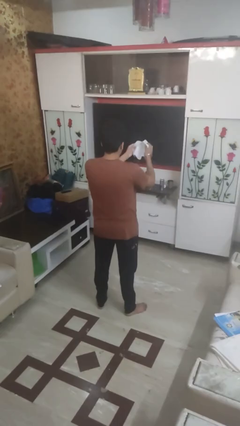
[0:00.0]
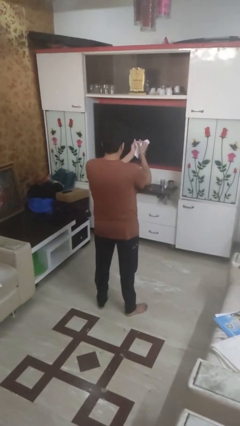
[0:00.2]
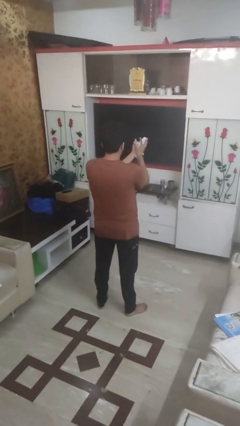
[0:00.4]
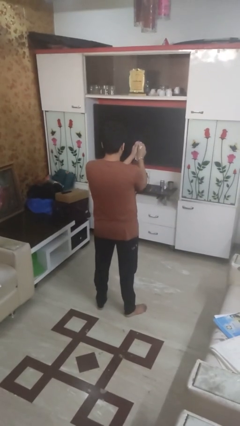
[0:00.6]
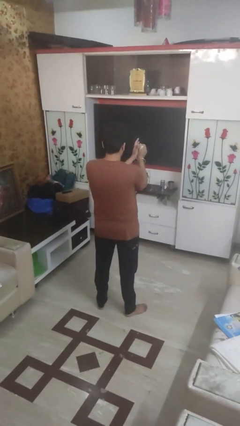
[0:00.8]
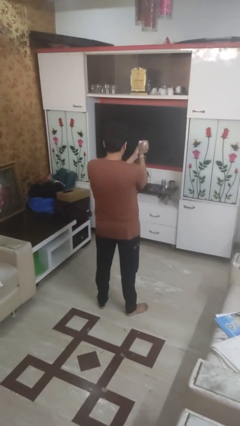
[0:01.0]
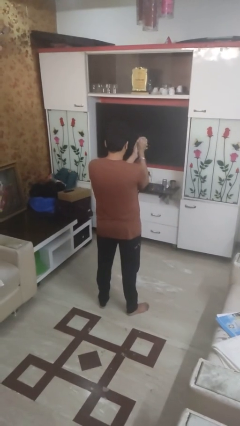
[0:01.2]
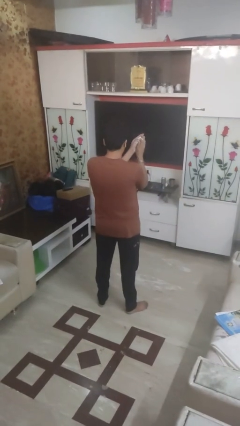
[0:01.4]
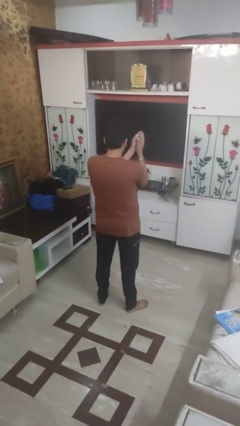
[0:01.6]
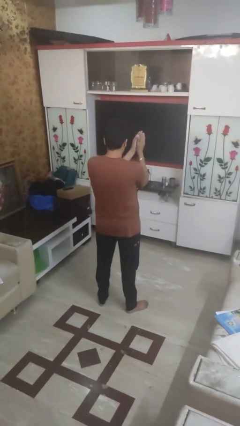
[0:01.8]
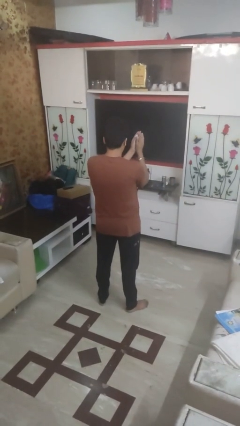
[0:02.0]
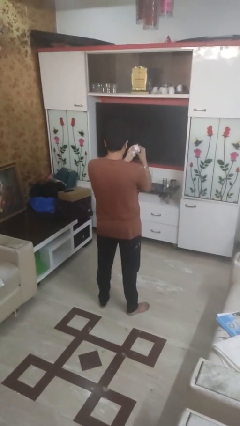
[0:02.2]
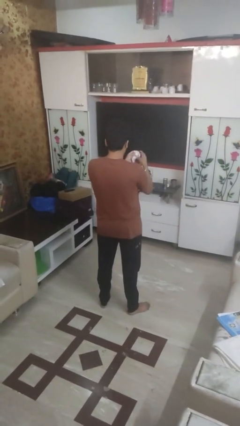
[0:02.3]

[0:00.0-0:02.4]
person crumples paper

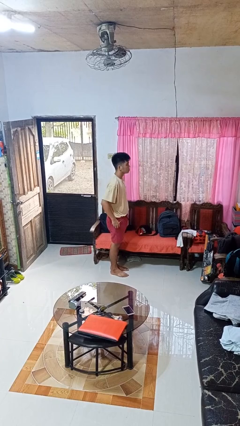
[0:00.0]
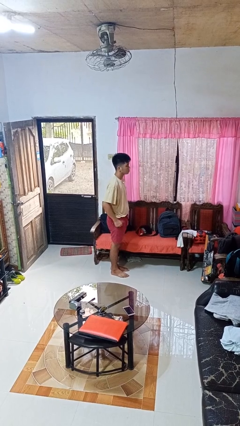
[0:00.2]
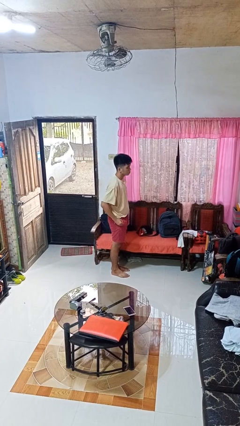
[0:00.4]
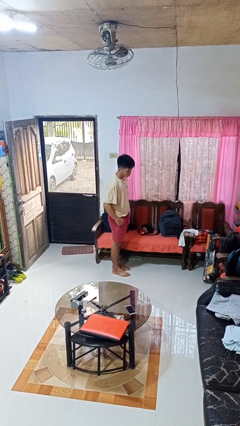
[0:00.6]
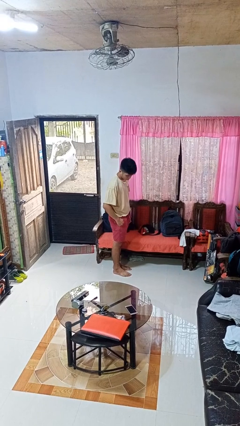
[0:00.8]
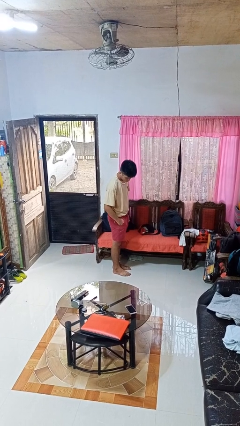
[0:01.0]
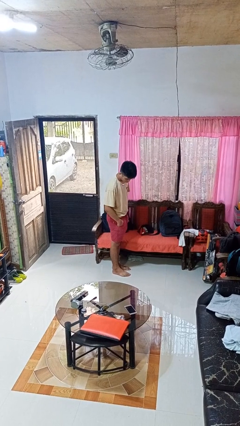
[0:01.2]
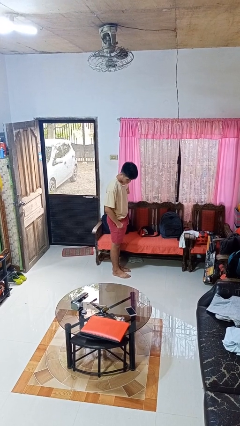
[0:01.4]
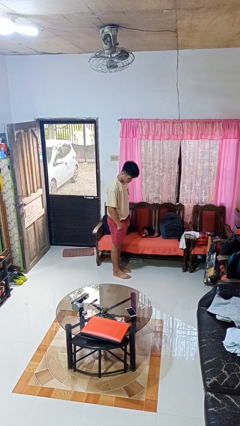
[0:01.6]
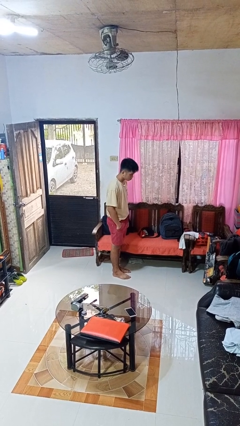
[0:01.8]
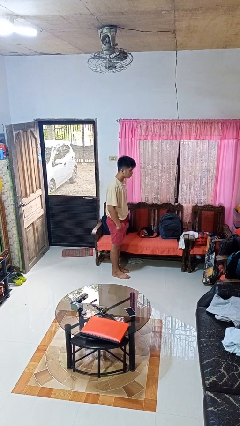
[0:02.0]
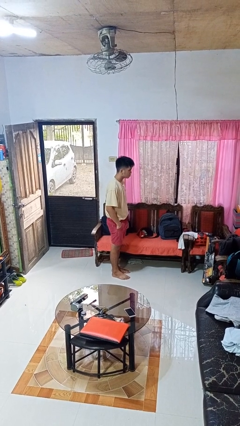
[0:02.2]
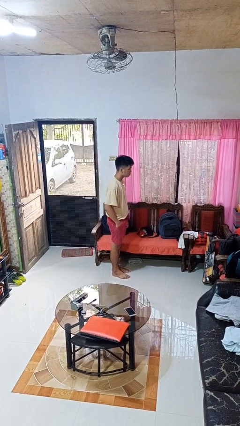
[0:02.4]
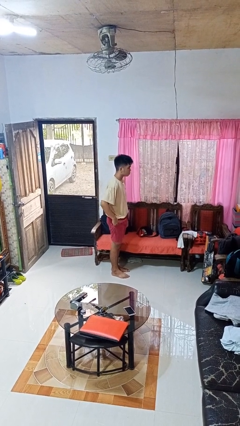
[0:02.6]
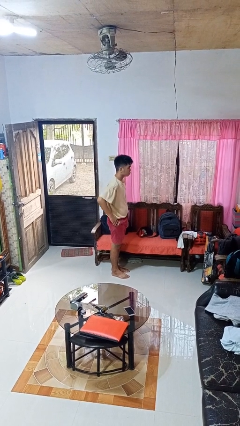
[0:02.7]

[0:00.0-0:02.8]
person puts hands in back pockets

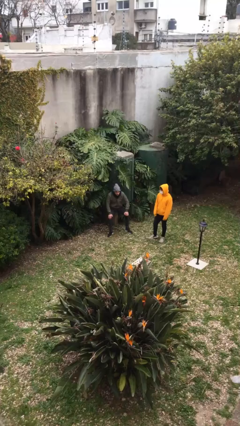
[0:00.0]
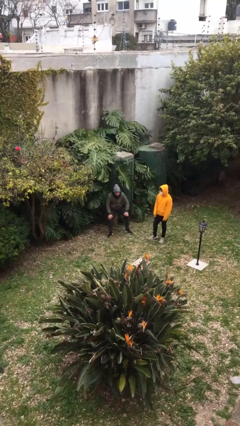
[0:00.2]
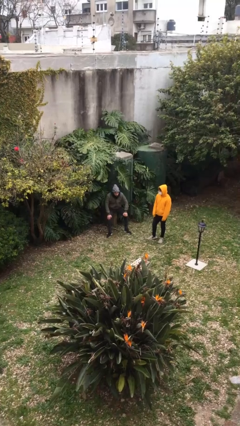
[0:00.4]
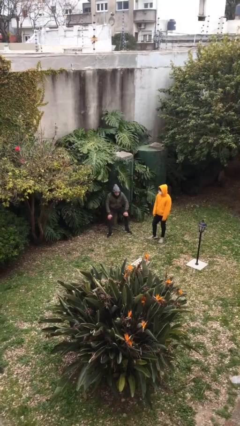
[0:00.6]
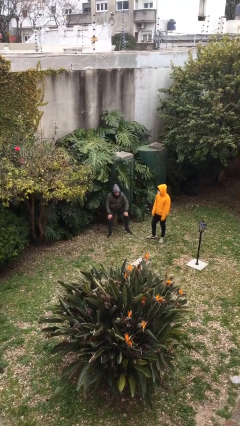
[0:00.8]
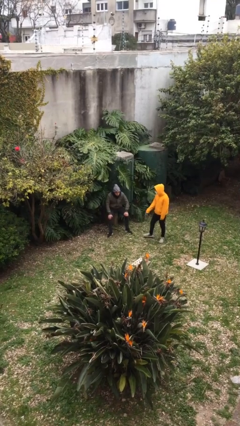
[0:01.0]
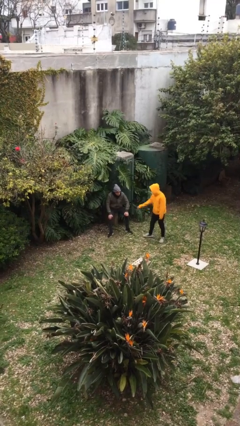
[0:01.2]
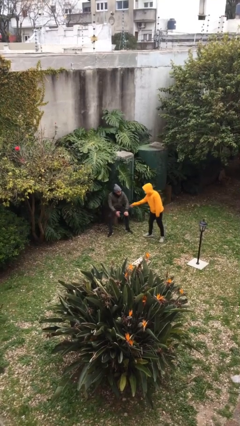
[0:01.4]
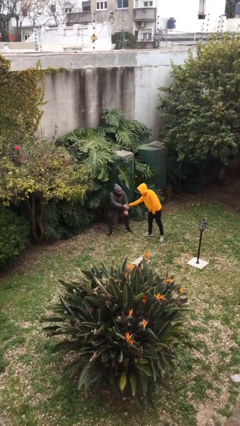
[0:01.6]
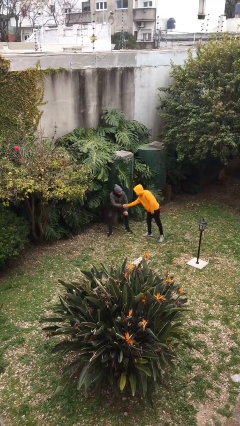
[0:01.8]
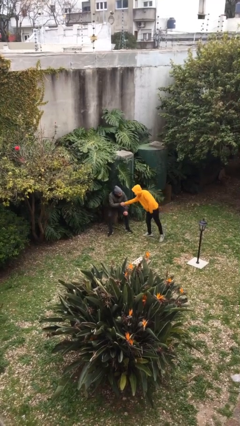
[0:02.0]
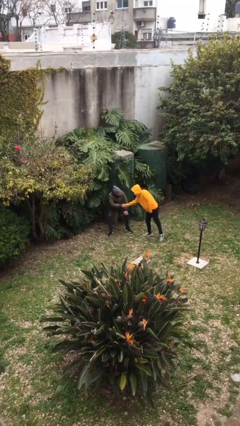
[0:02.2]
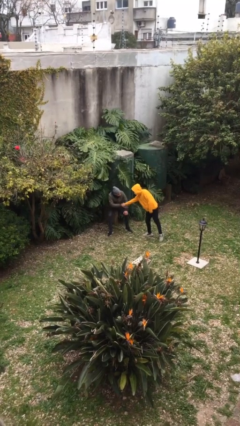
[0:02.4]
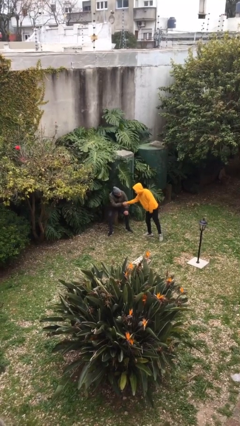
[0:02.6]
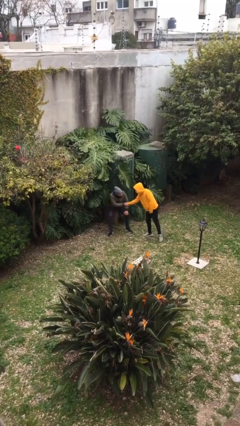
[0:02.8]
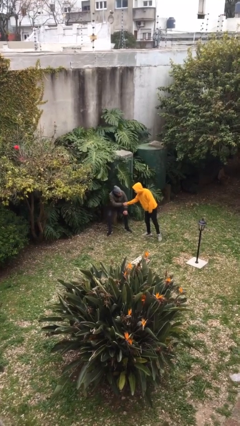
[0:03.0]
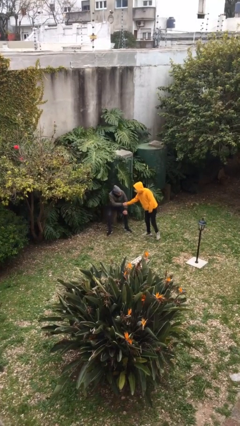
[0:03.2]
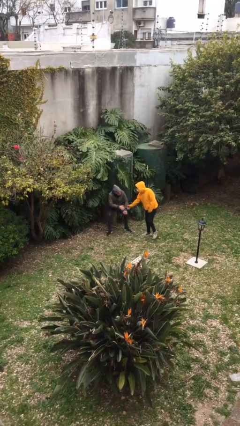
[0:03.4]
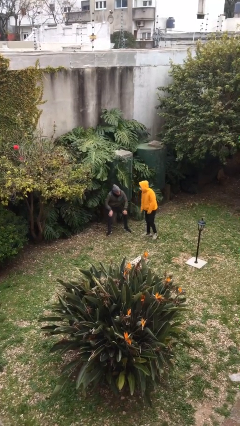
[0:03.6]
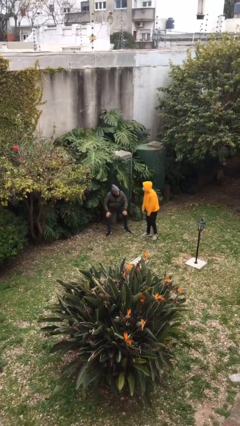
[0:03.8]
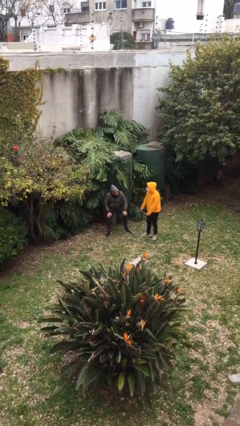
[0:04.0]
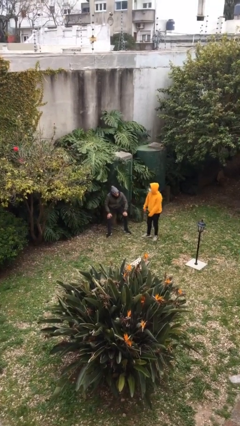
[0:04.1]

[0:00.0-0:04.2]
person shakes hand

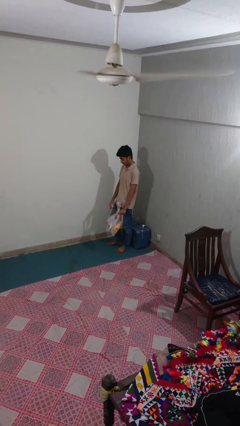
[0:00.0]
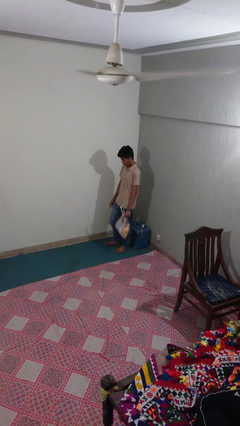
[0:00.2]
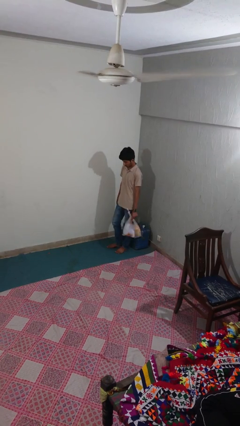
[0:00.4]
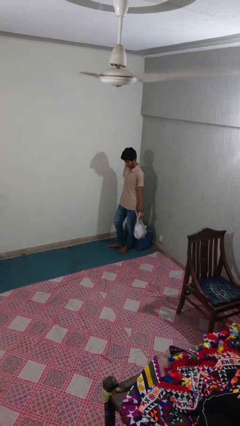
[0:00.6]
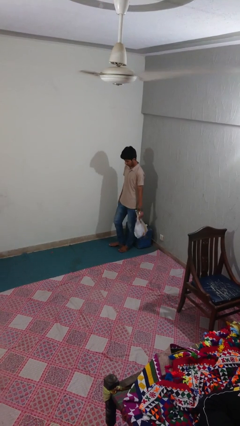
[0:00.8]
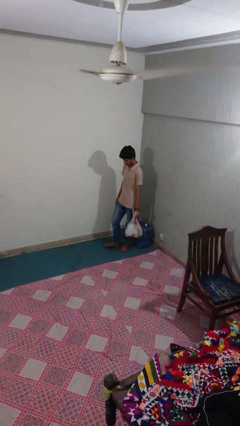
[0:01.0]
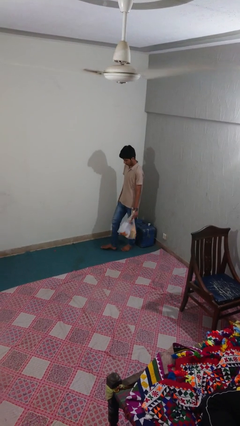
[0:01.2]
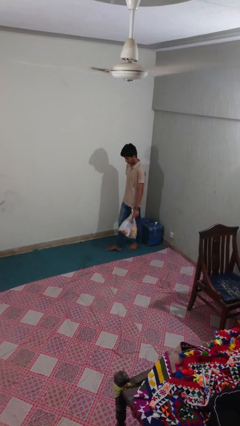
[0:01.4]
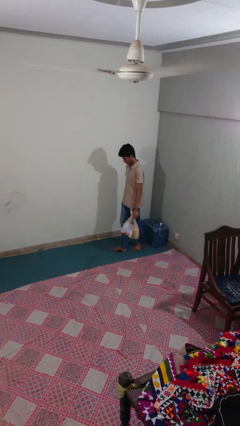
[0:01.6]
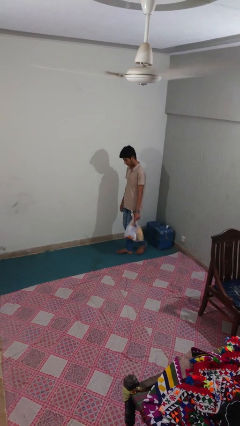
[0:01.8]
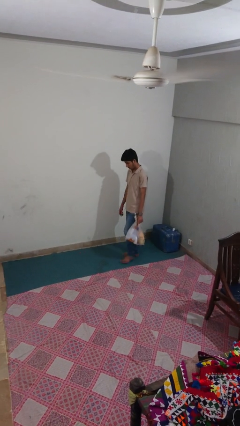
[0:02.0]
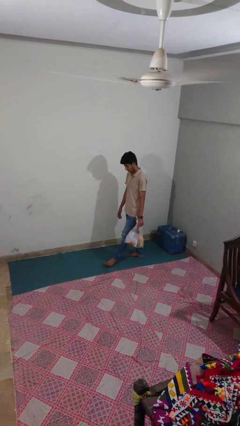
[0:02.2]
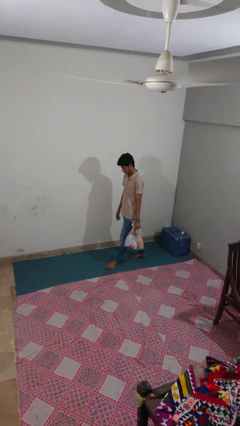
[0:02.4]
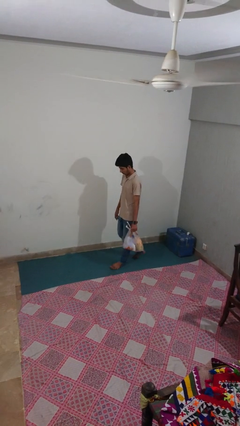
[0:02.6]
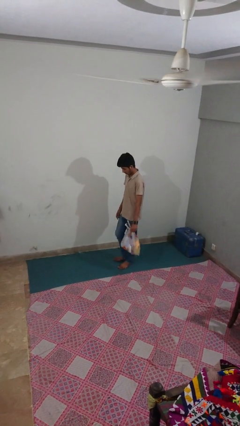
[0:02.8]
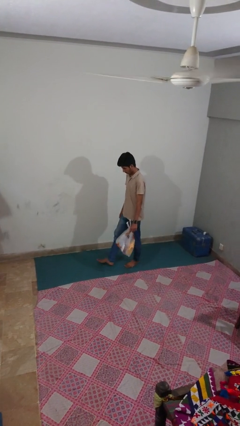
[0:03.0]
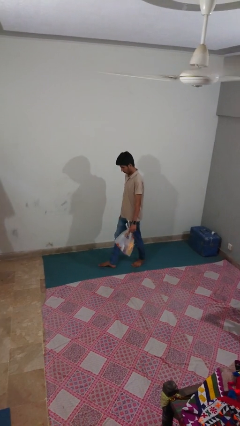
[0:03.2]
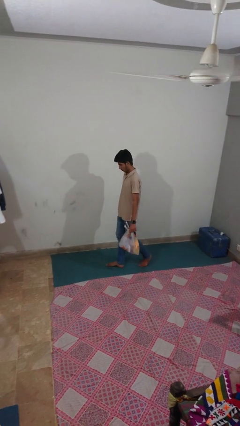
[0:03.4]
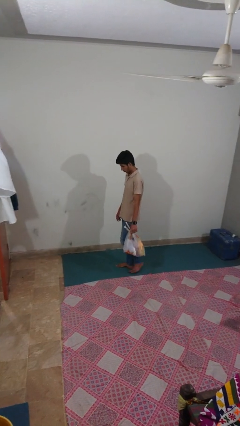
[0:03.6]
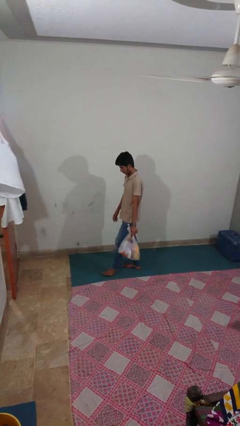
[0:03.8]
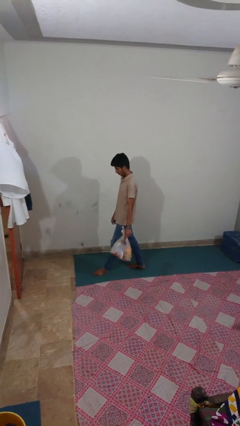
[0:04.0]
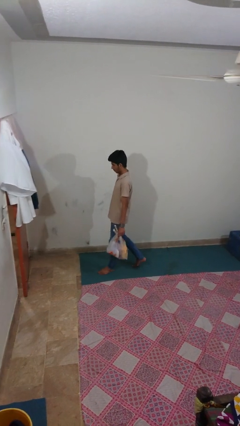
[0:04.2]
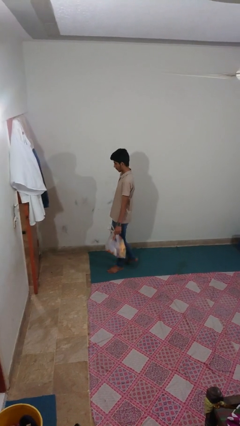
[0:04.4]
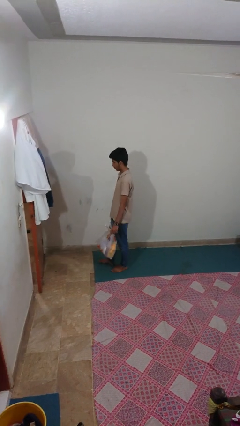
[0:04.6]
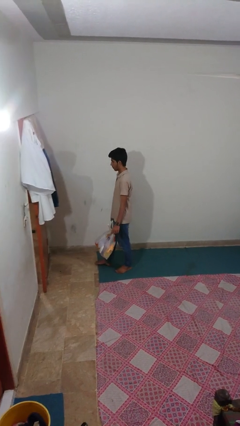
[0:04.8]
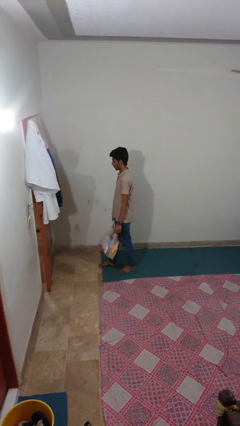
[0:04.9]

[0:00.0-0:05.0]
person carries groceries

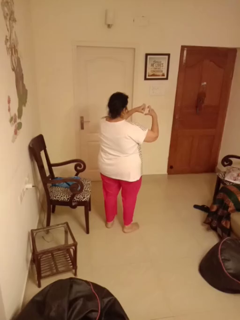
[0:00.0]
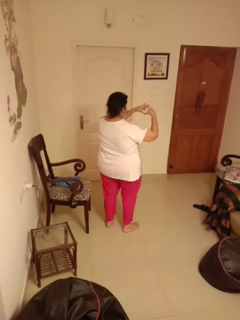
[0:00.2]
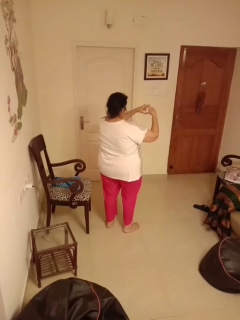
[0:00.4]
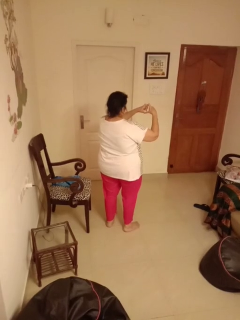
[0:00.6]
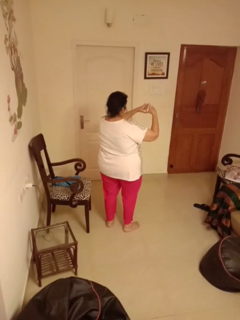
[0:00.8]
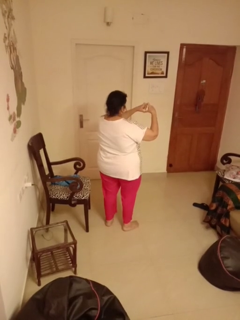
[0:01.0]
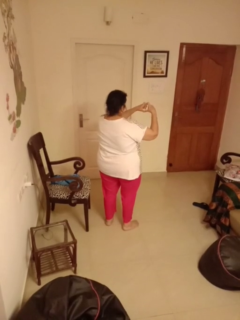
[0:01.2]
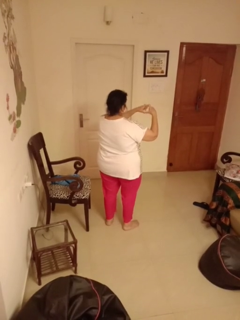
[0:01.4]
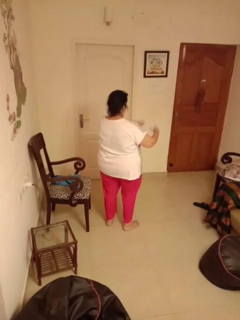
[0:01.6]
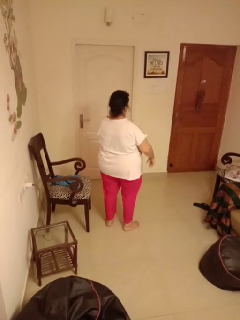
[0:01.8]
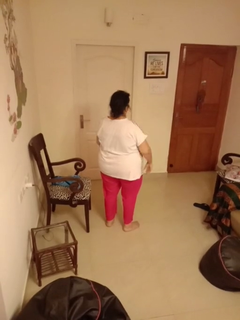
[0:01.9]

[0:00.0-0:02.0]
person gestures heart

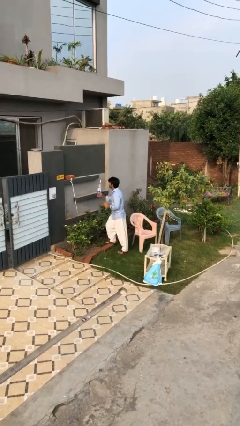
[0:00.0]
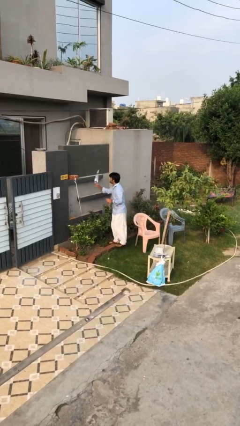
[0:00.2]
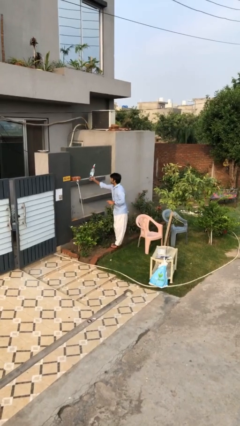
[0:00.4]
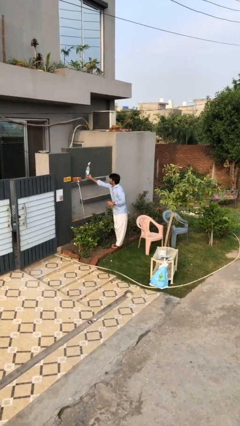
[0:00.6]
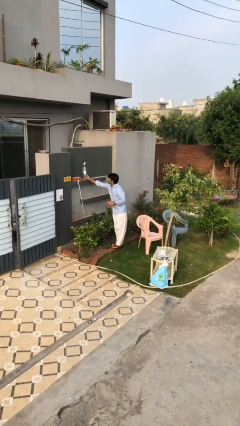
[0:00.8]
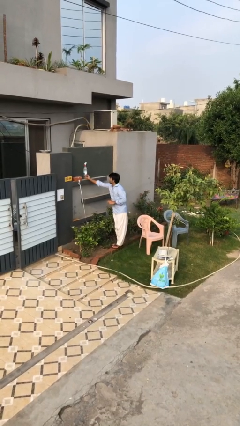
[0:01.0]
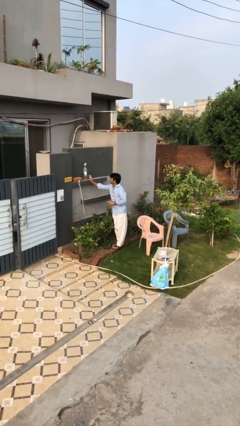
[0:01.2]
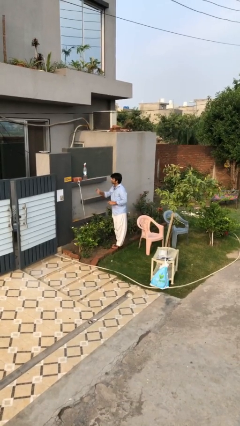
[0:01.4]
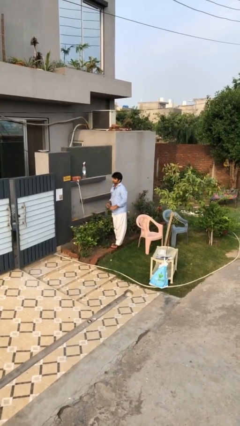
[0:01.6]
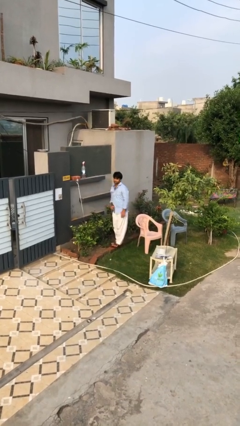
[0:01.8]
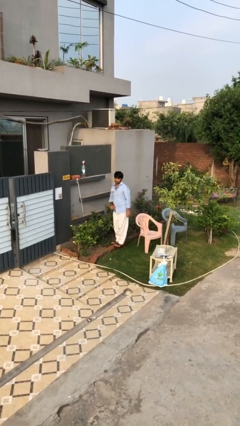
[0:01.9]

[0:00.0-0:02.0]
person puts down object on shelf
